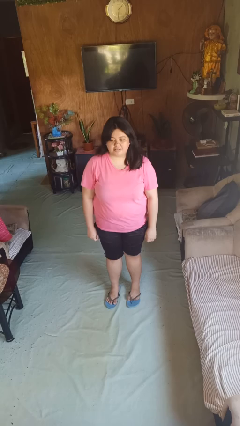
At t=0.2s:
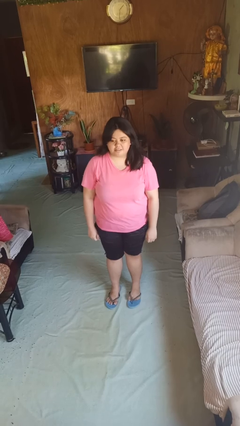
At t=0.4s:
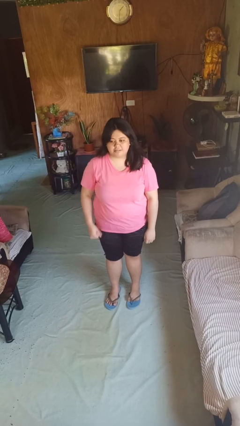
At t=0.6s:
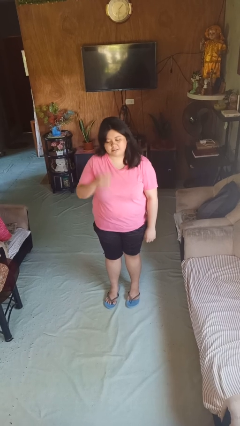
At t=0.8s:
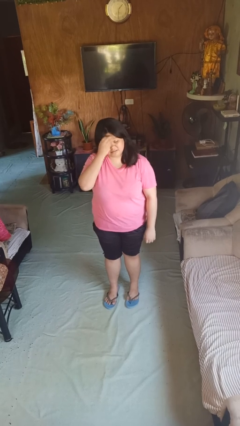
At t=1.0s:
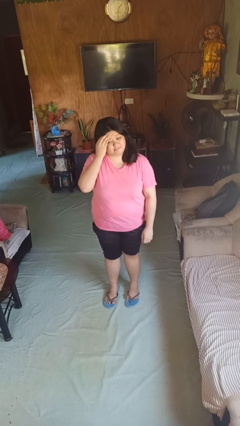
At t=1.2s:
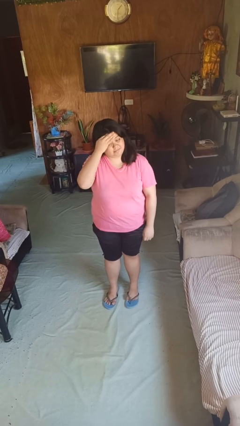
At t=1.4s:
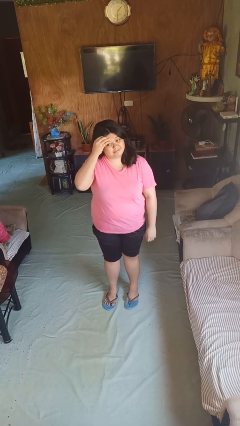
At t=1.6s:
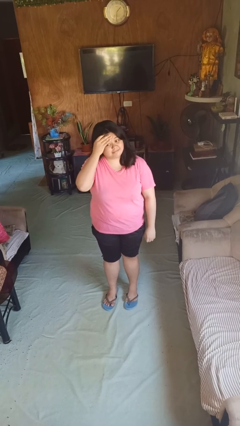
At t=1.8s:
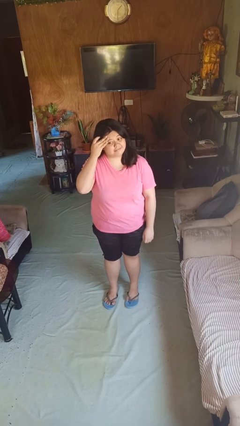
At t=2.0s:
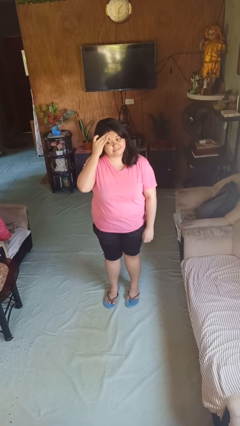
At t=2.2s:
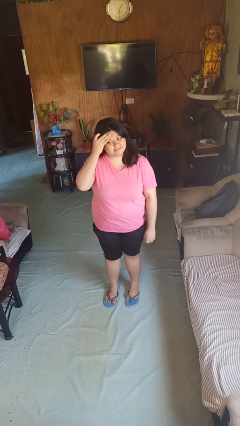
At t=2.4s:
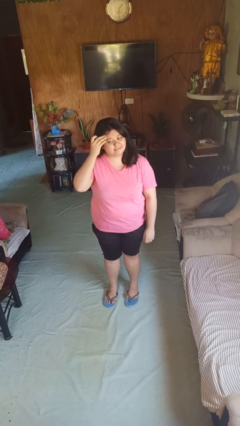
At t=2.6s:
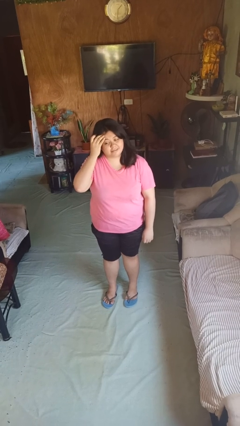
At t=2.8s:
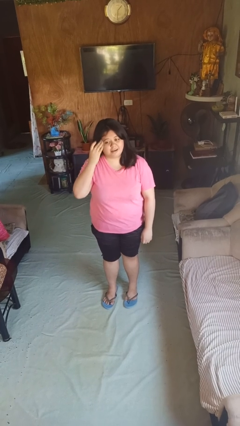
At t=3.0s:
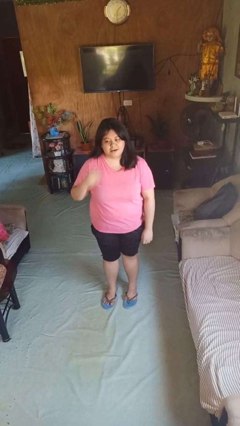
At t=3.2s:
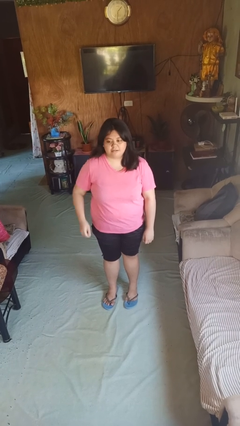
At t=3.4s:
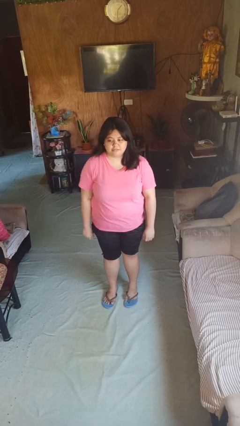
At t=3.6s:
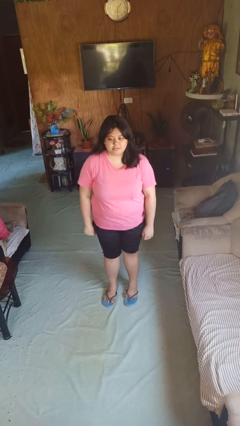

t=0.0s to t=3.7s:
person scratches face

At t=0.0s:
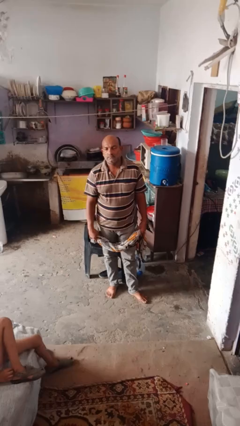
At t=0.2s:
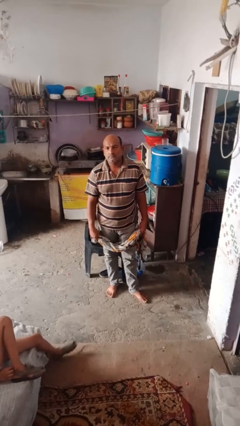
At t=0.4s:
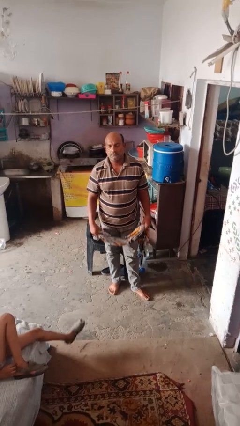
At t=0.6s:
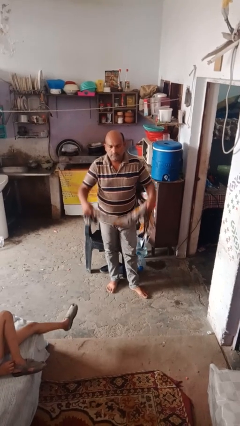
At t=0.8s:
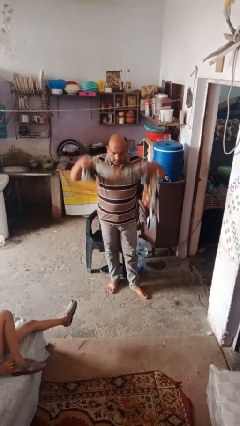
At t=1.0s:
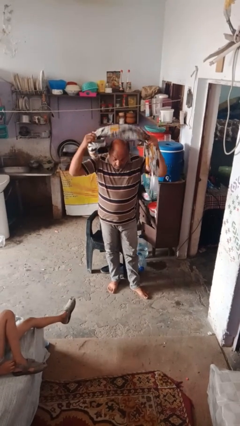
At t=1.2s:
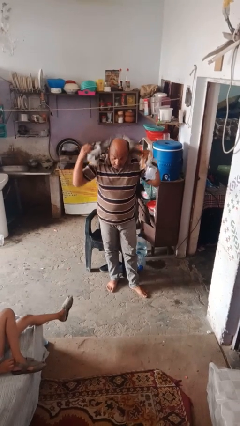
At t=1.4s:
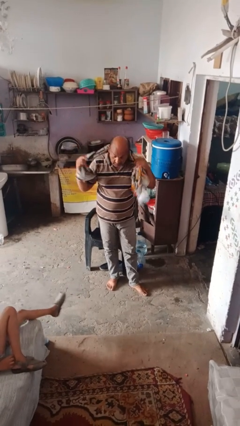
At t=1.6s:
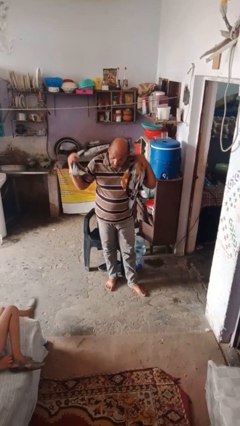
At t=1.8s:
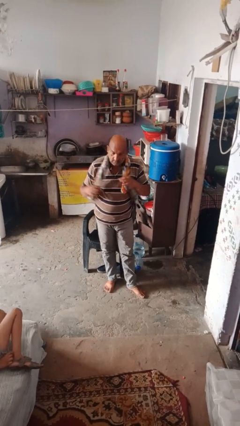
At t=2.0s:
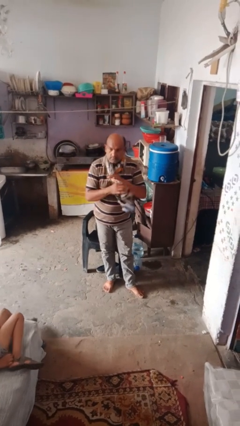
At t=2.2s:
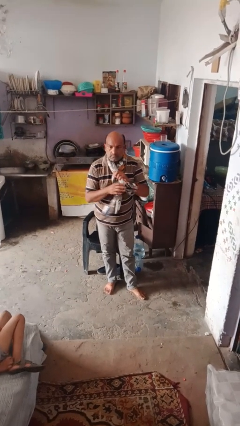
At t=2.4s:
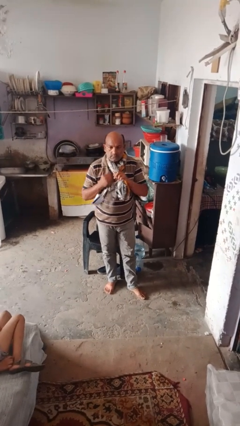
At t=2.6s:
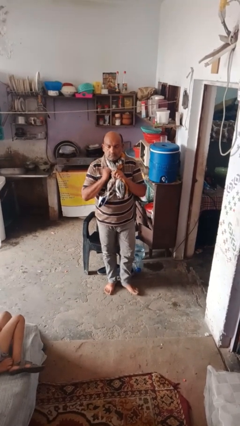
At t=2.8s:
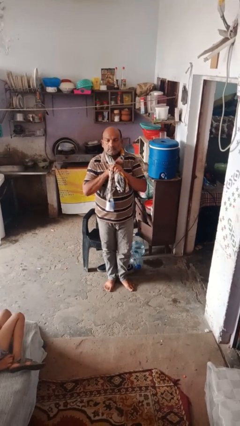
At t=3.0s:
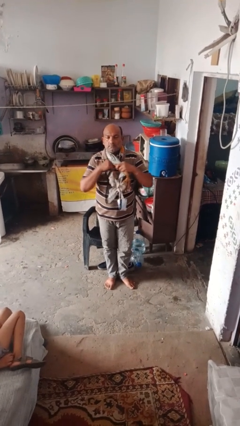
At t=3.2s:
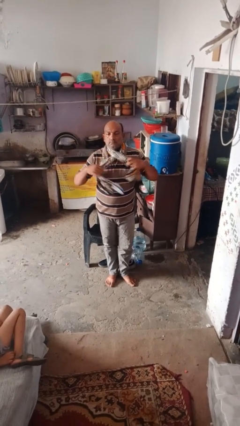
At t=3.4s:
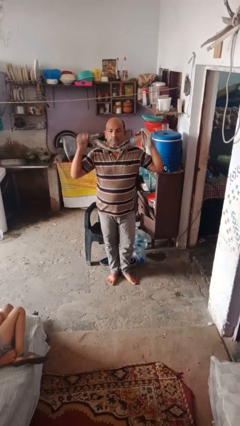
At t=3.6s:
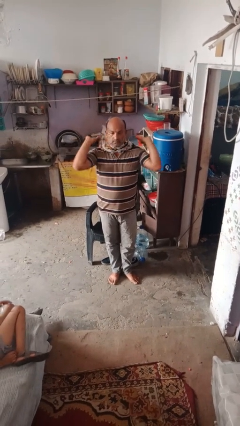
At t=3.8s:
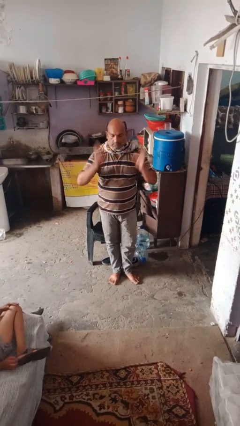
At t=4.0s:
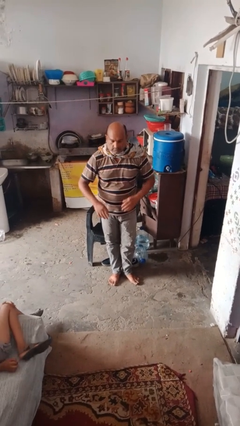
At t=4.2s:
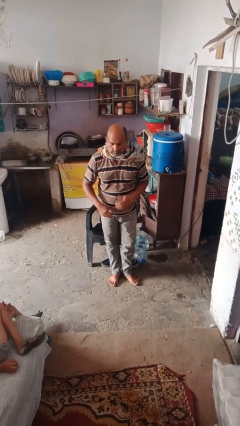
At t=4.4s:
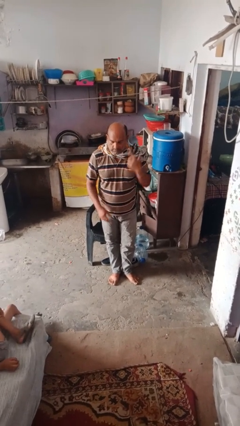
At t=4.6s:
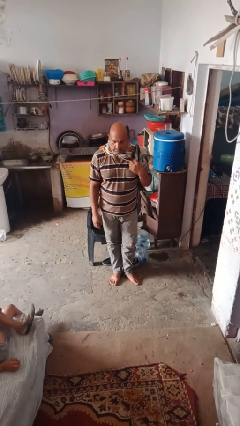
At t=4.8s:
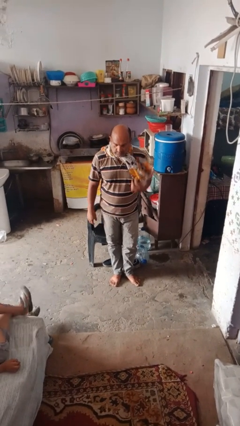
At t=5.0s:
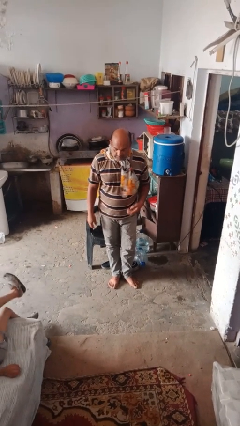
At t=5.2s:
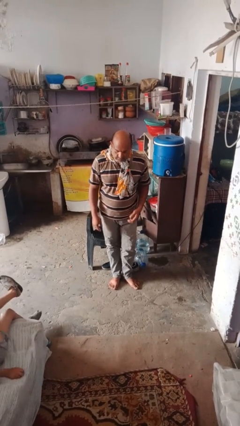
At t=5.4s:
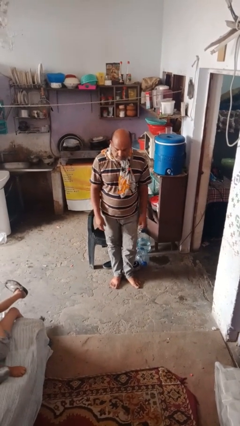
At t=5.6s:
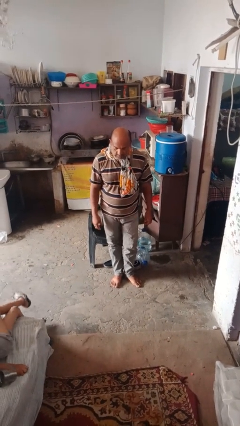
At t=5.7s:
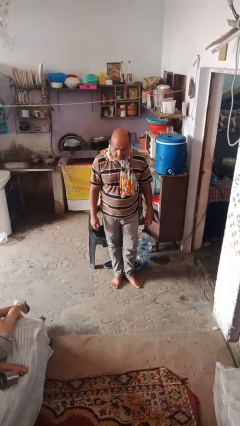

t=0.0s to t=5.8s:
person puts on scarf

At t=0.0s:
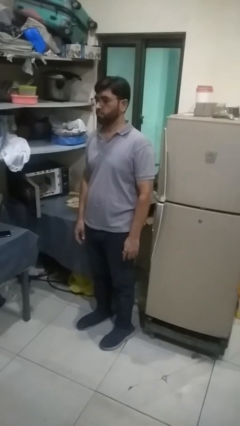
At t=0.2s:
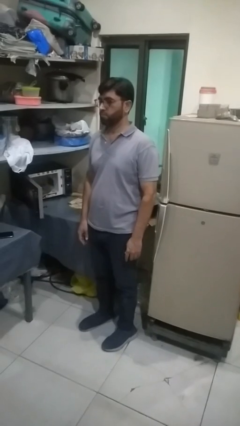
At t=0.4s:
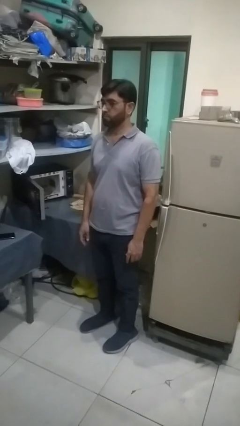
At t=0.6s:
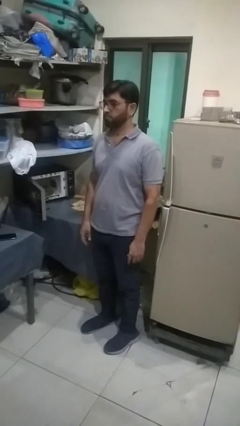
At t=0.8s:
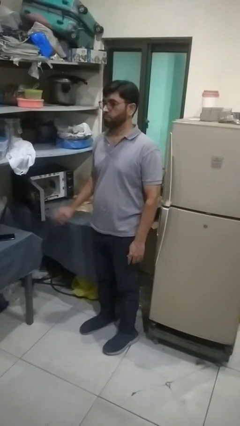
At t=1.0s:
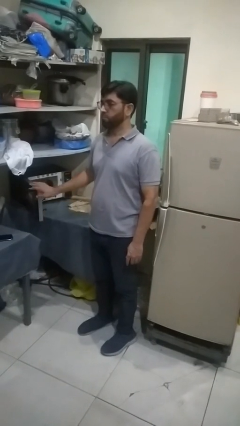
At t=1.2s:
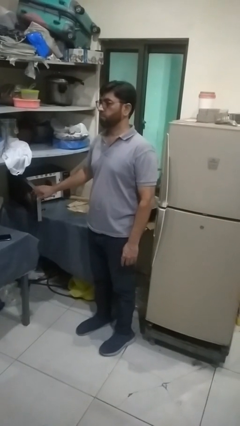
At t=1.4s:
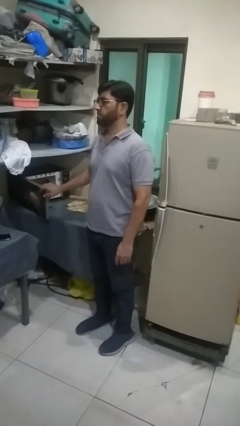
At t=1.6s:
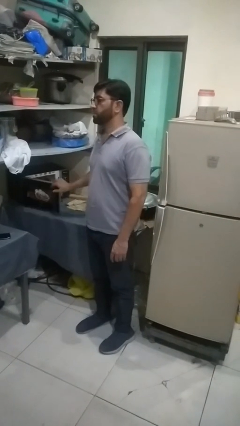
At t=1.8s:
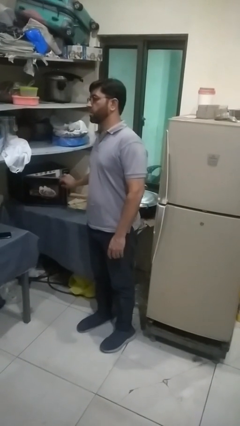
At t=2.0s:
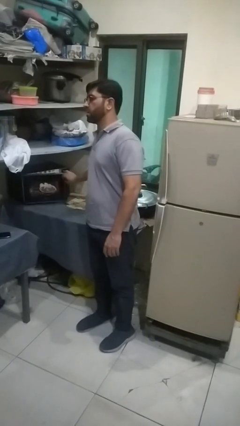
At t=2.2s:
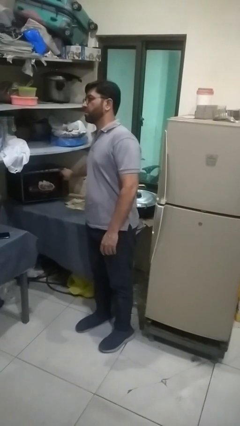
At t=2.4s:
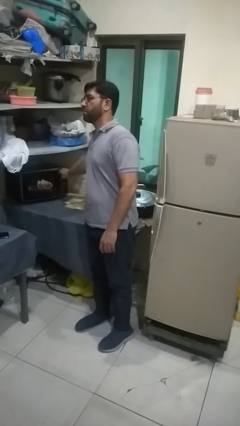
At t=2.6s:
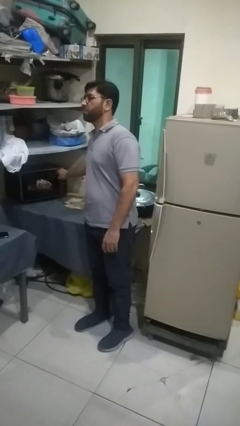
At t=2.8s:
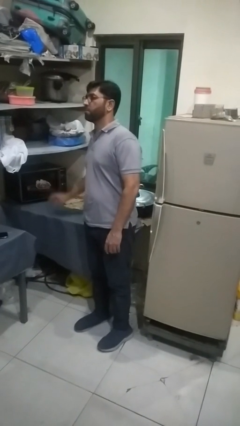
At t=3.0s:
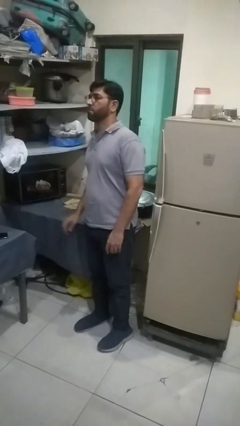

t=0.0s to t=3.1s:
person closes oven door

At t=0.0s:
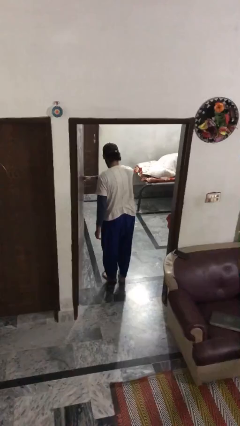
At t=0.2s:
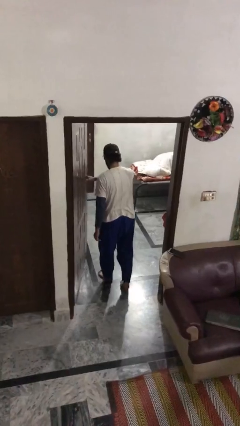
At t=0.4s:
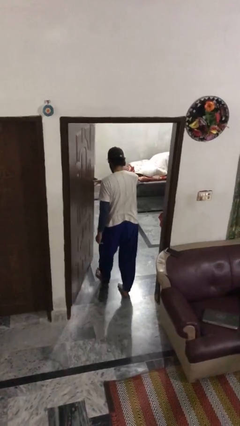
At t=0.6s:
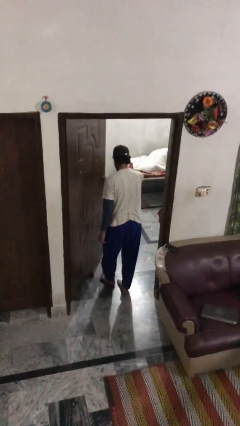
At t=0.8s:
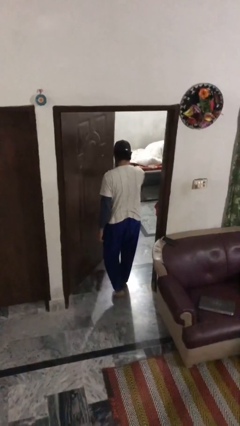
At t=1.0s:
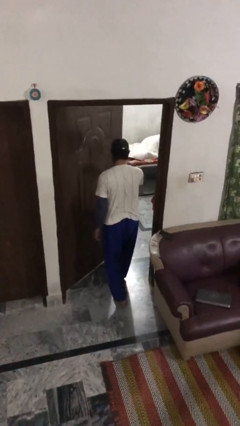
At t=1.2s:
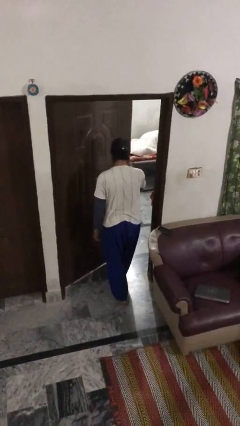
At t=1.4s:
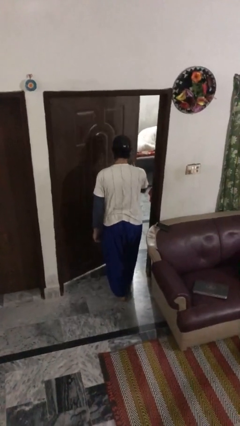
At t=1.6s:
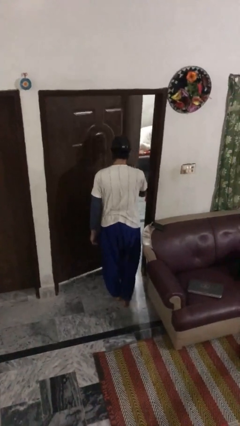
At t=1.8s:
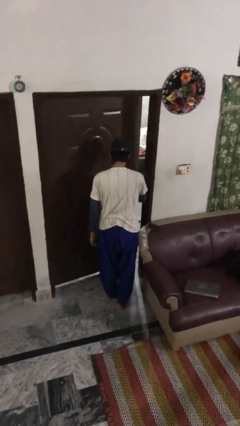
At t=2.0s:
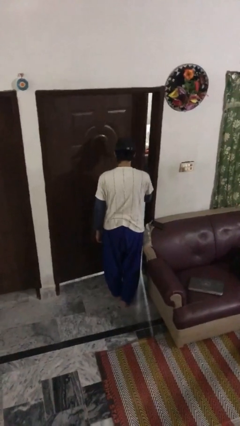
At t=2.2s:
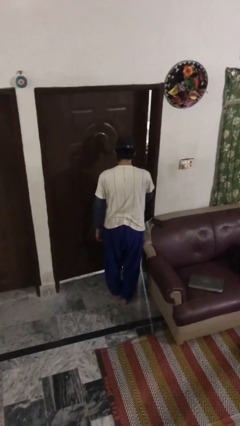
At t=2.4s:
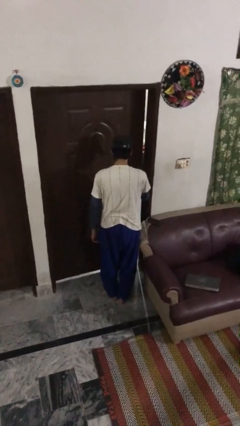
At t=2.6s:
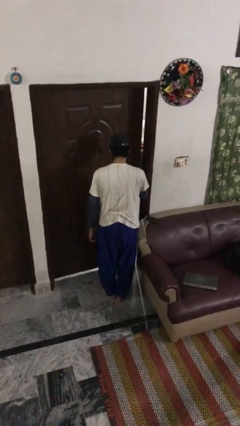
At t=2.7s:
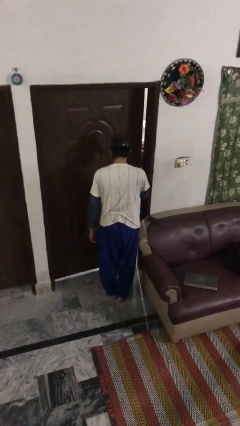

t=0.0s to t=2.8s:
person closes facility door

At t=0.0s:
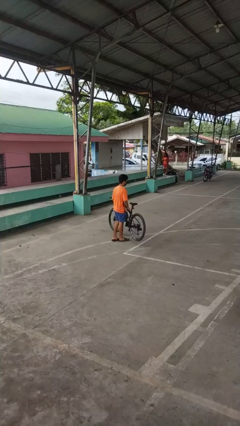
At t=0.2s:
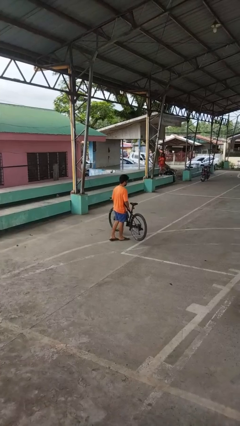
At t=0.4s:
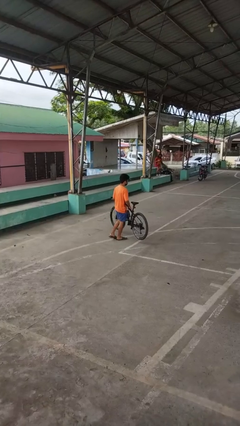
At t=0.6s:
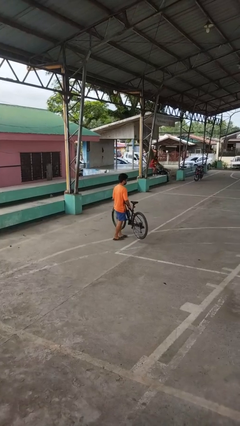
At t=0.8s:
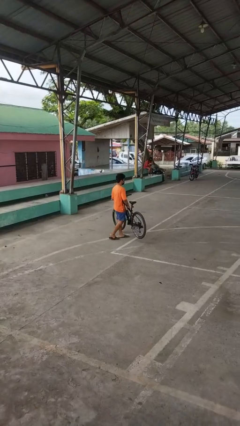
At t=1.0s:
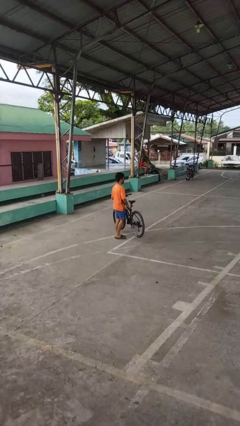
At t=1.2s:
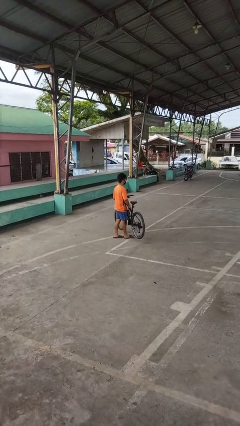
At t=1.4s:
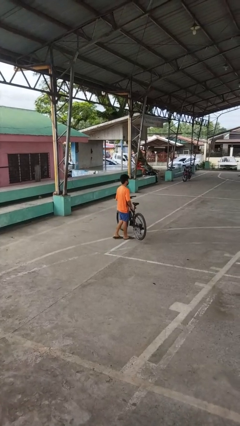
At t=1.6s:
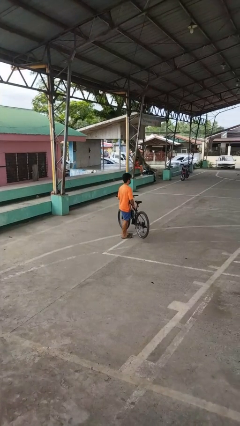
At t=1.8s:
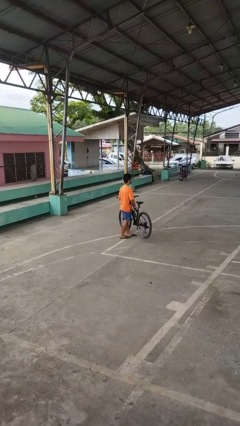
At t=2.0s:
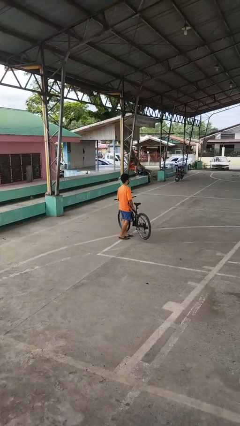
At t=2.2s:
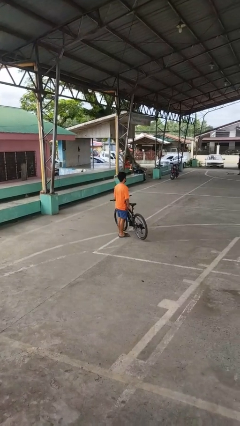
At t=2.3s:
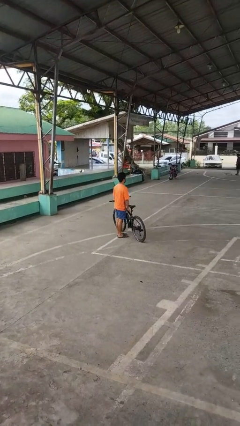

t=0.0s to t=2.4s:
person carries bicycle

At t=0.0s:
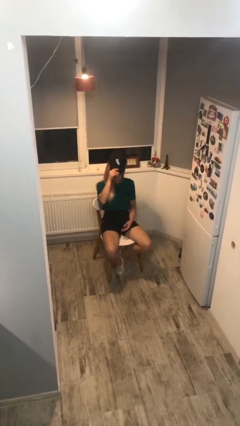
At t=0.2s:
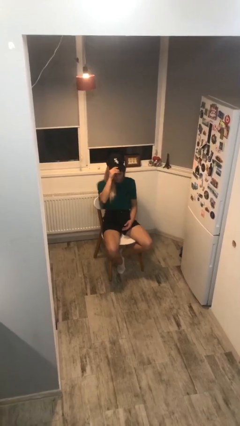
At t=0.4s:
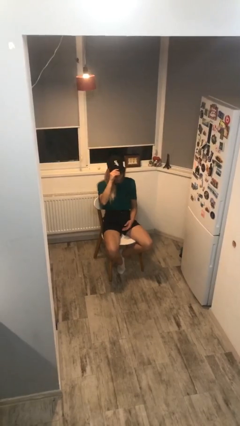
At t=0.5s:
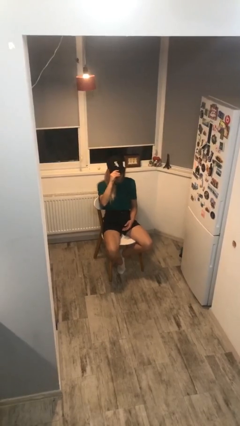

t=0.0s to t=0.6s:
person puts on hat
